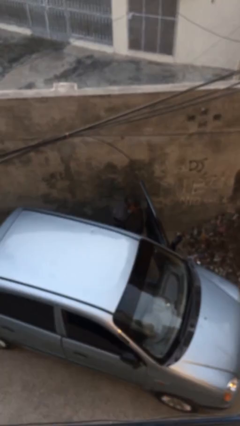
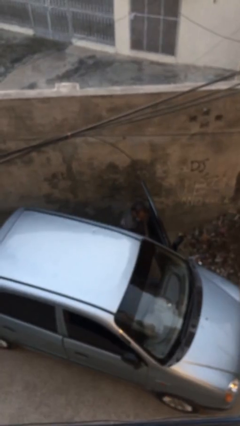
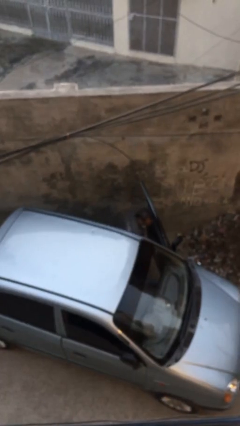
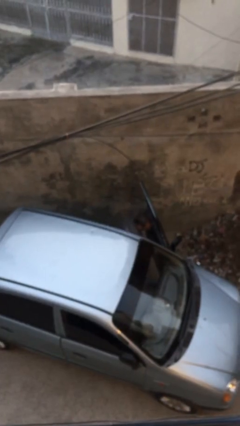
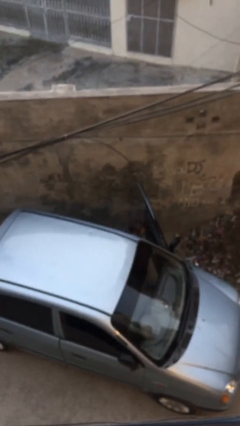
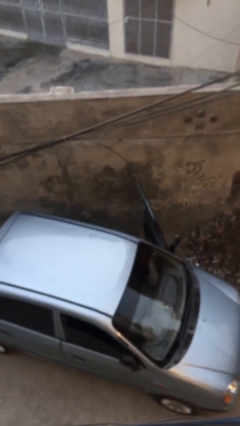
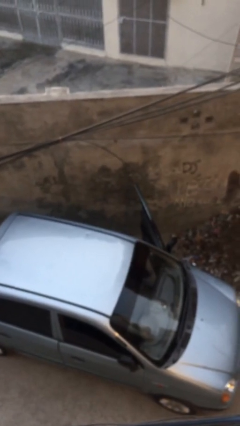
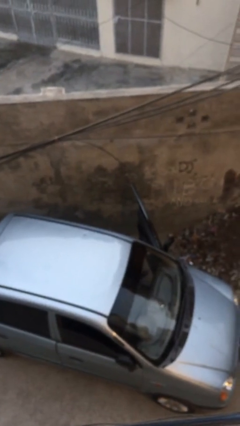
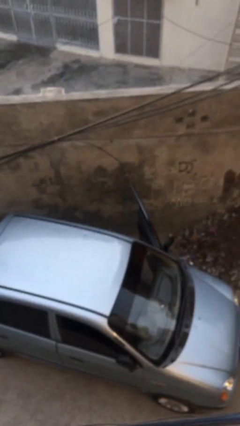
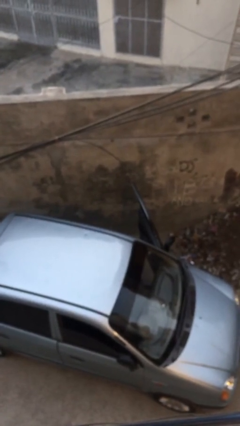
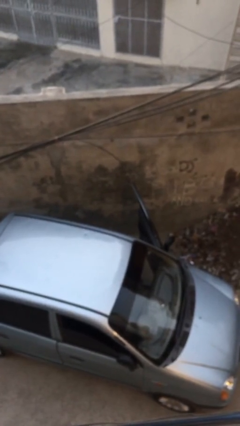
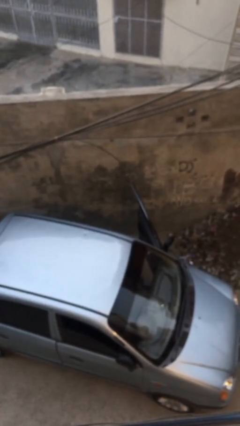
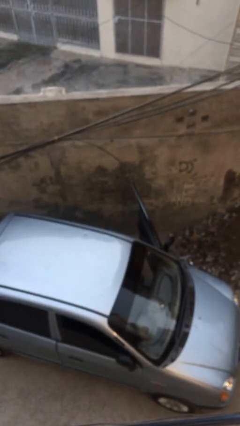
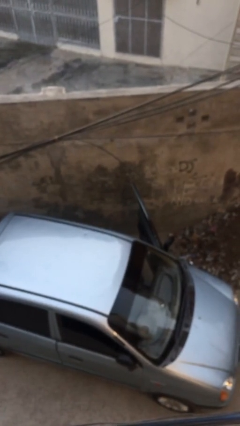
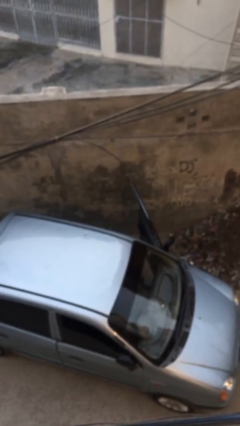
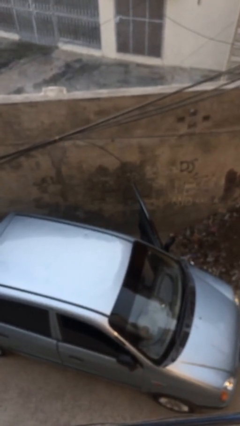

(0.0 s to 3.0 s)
person enters car

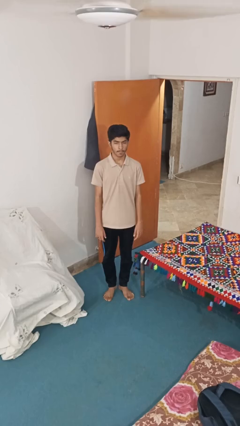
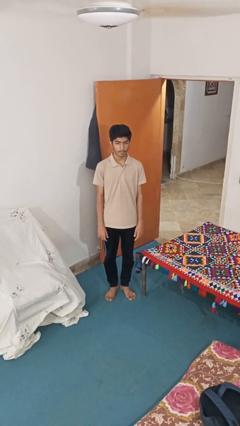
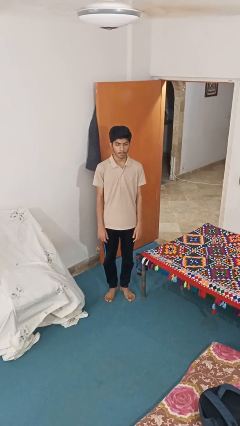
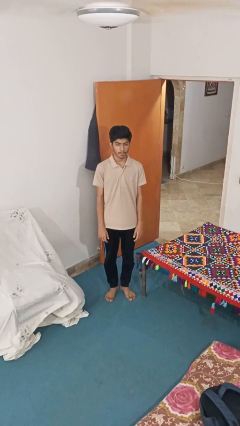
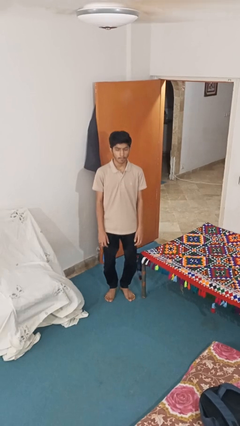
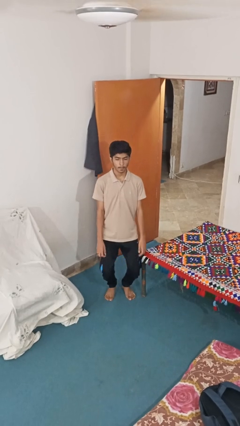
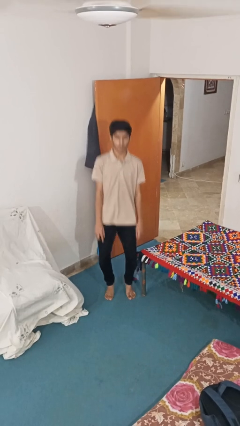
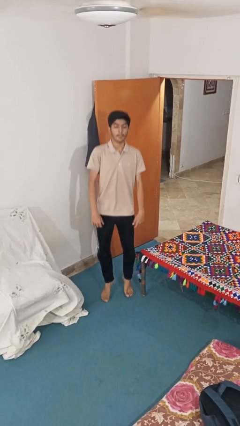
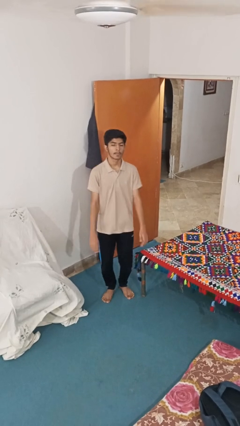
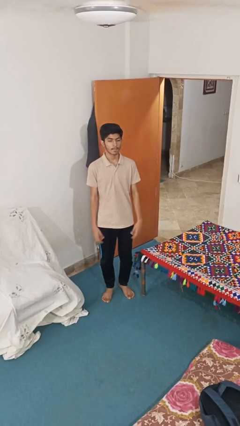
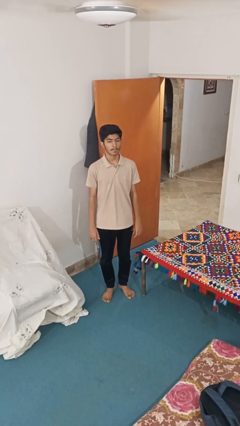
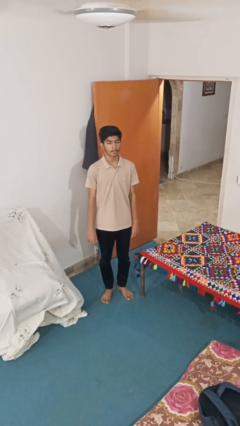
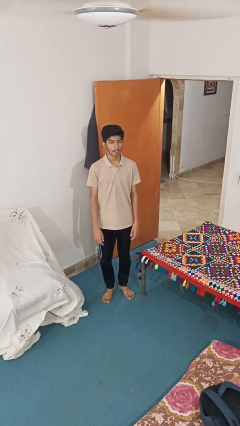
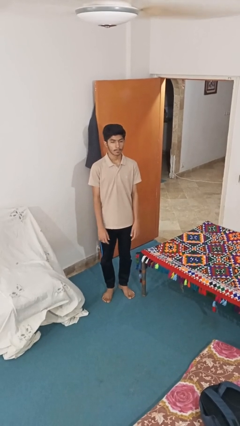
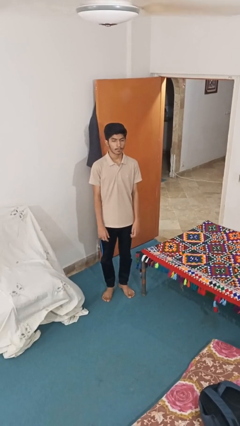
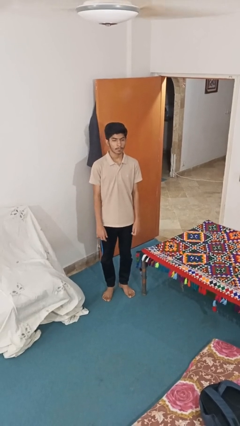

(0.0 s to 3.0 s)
person jumps

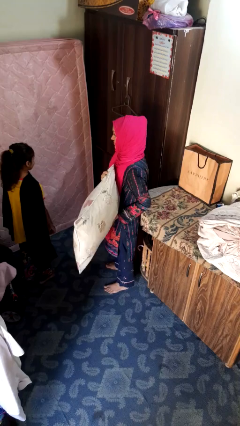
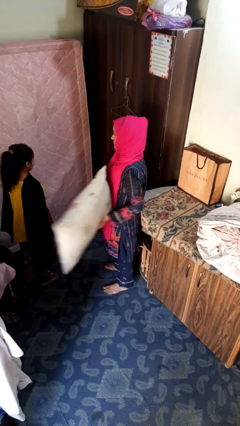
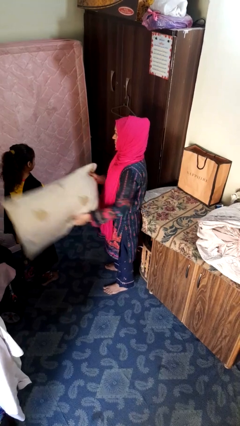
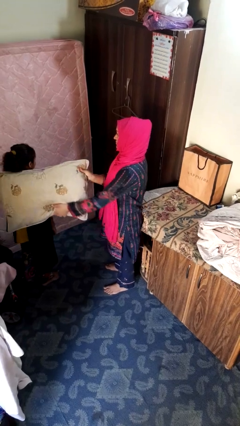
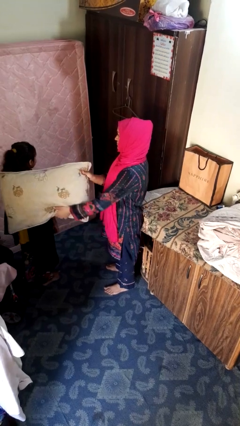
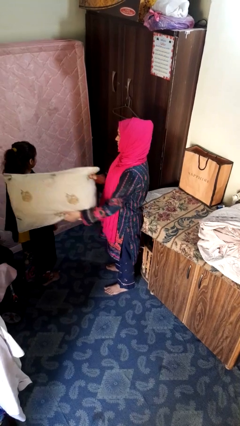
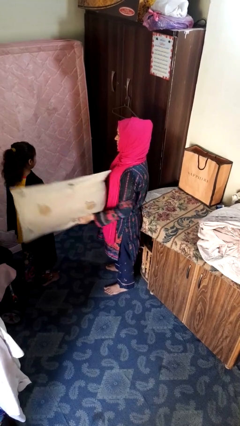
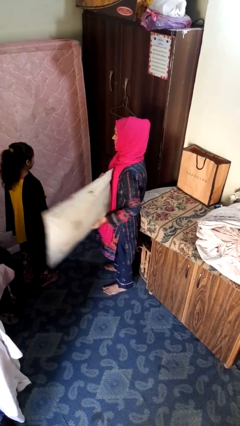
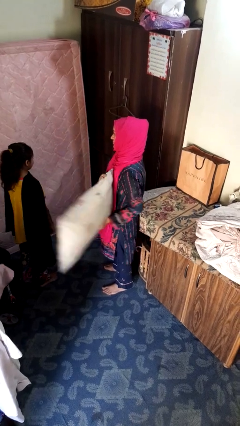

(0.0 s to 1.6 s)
person hits person with pillow

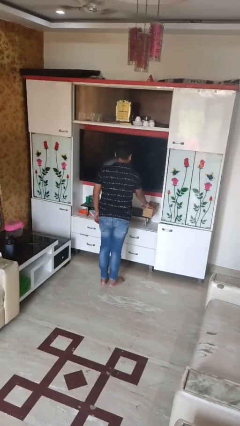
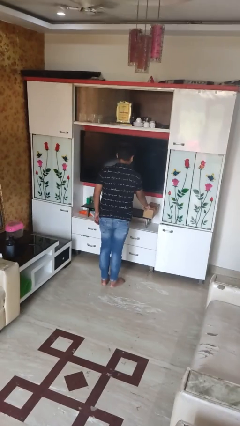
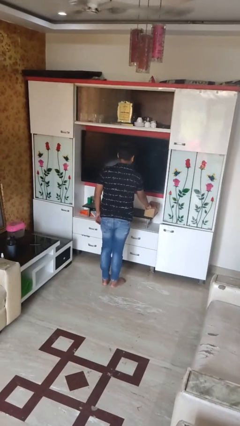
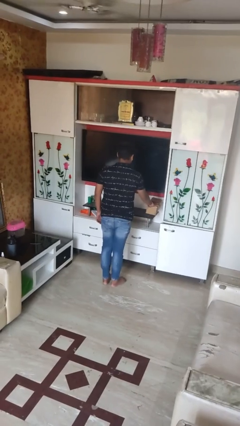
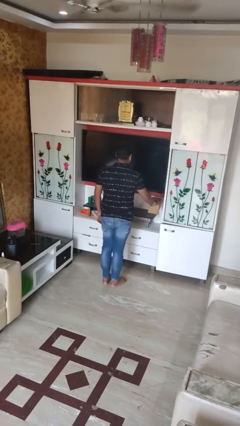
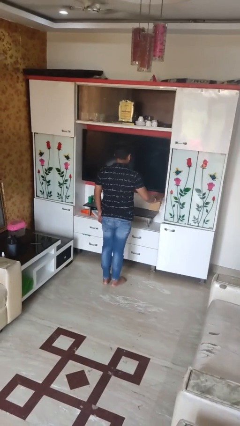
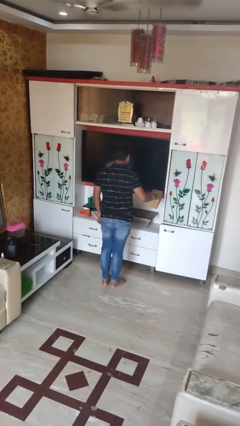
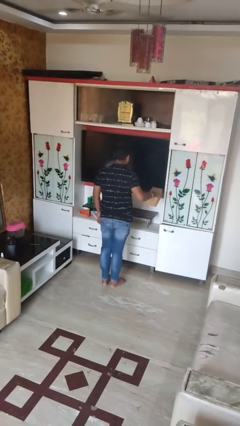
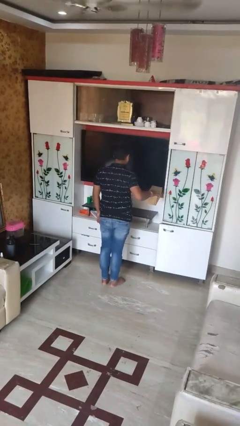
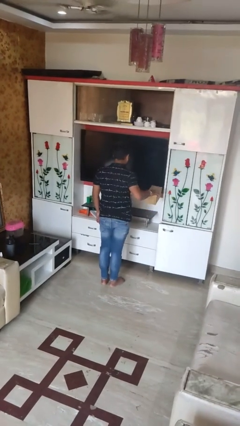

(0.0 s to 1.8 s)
person picks up object from countertop

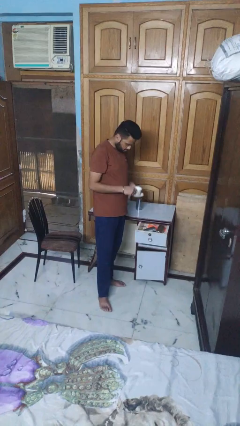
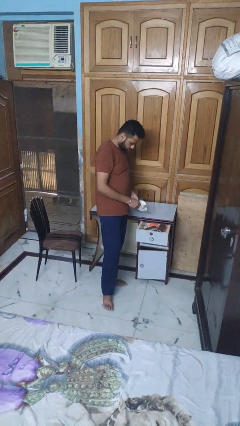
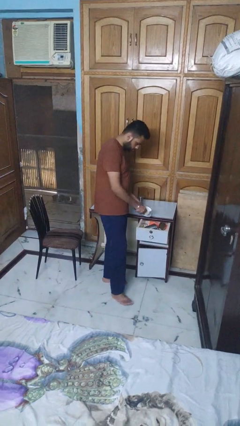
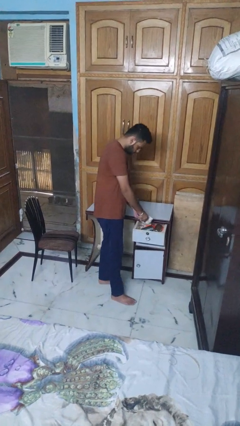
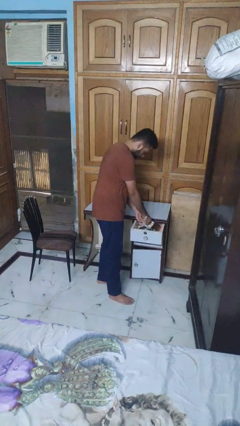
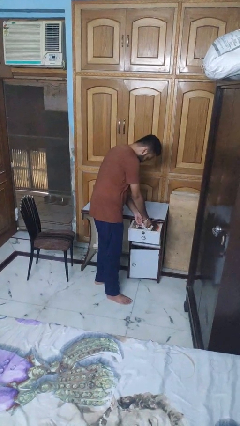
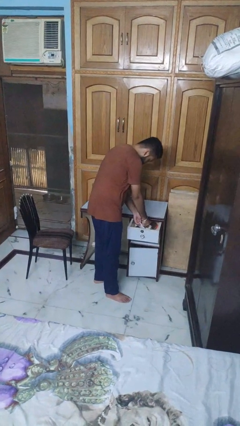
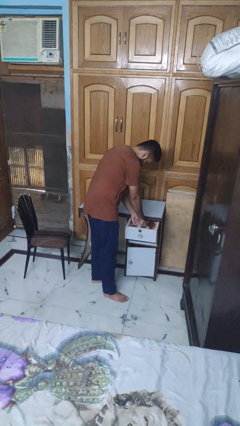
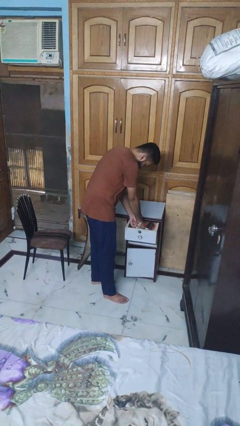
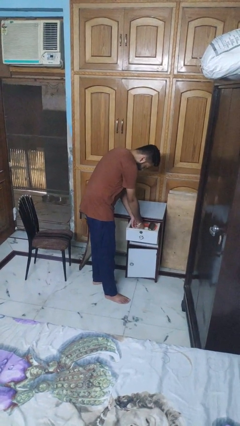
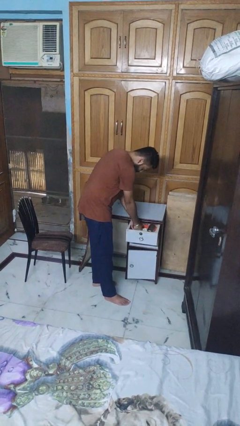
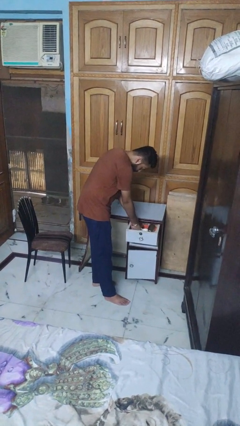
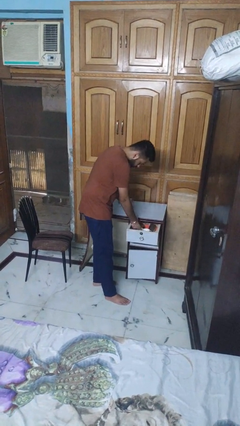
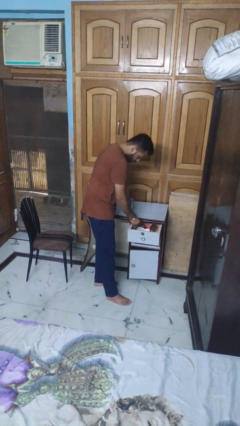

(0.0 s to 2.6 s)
person puts object into kitchen drawer

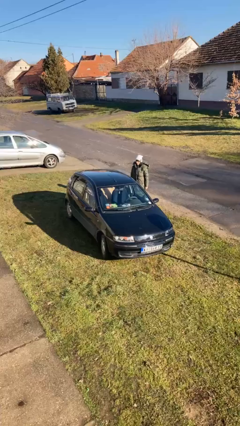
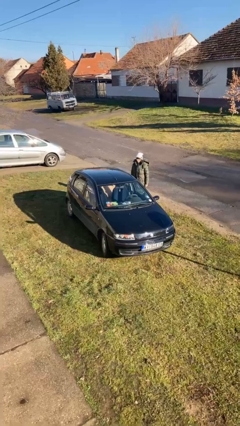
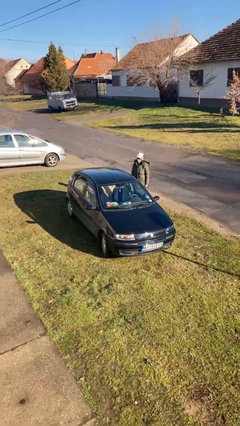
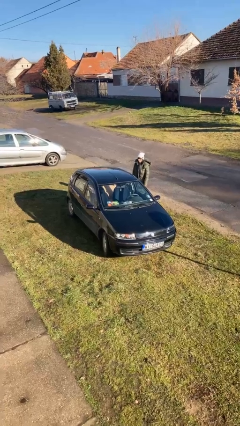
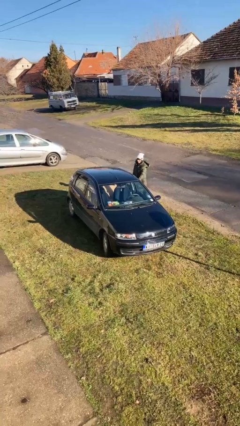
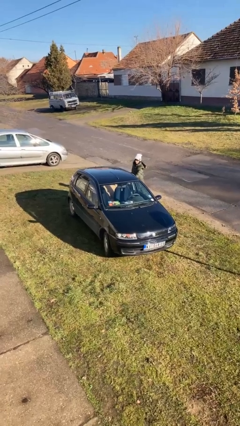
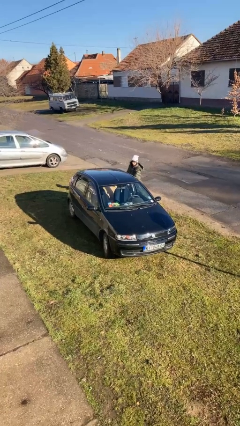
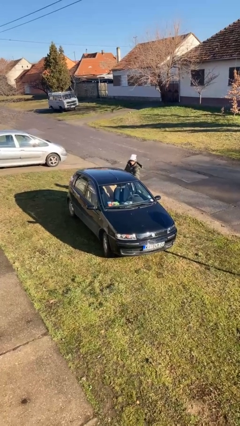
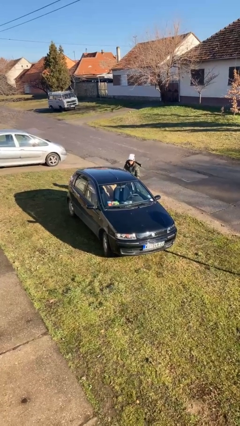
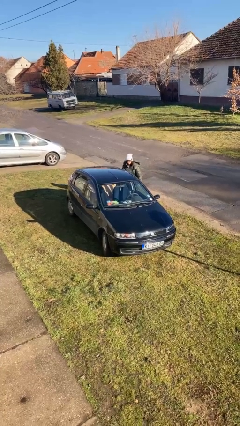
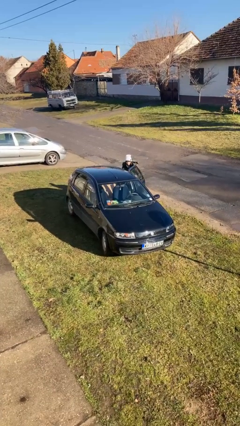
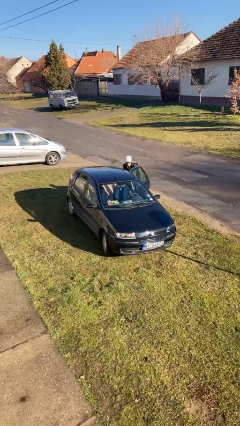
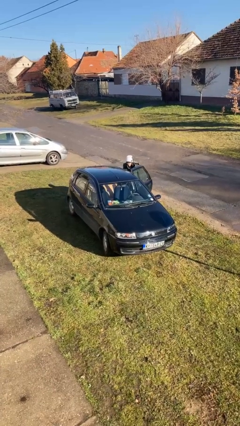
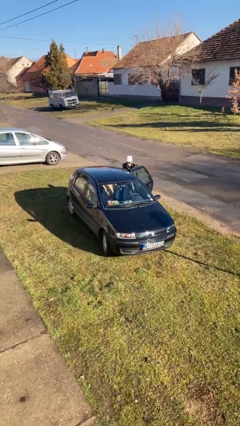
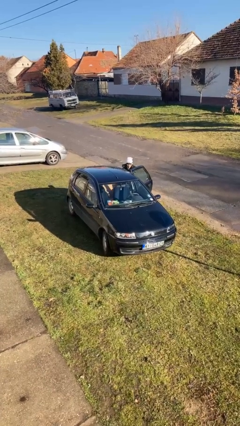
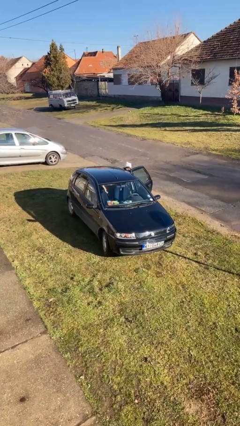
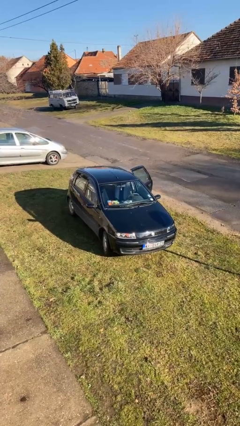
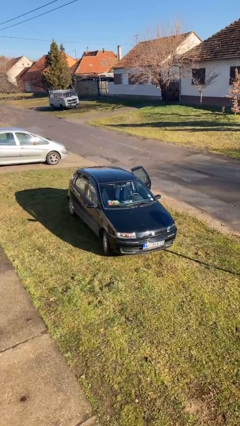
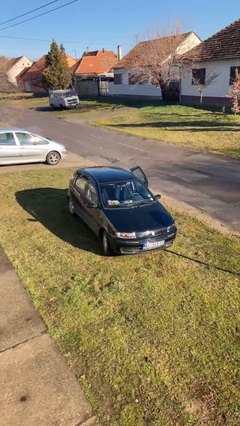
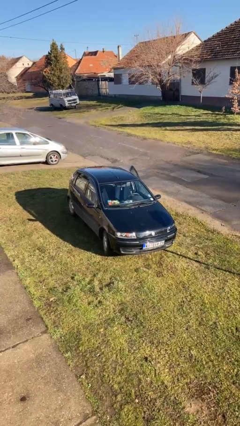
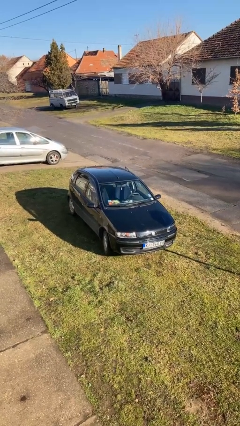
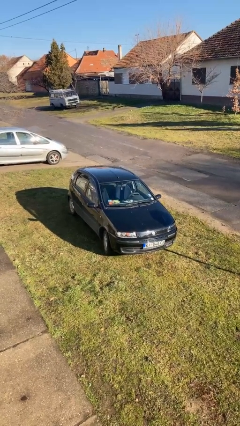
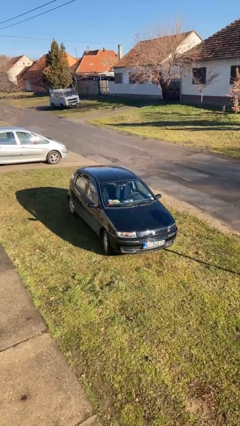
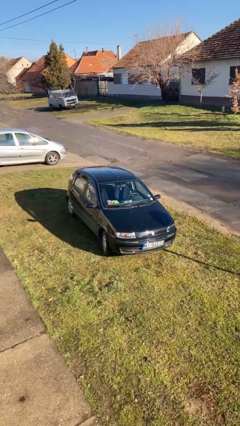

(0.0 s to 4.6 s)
car picks up person

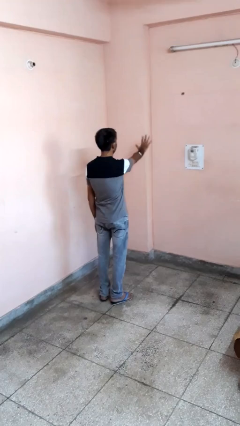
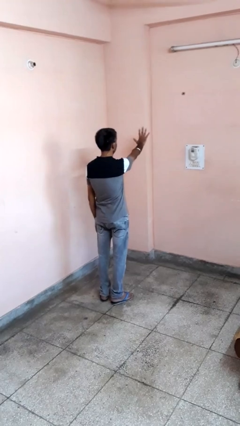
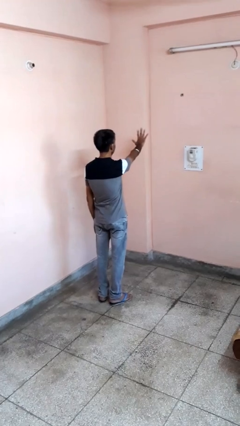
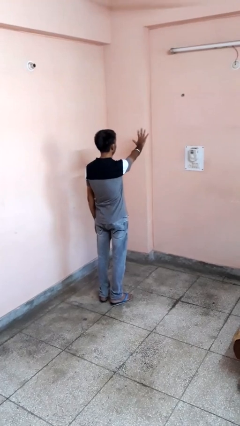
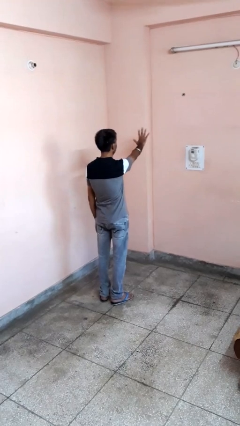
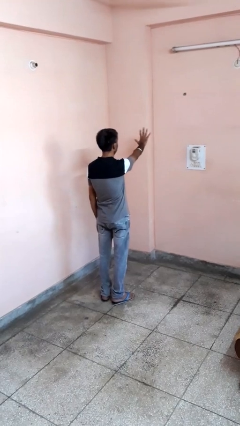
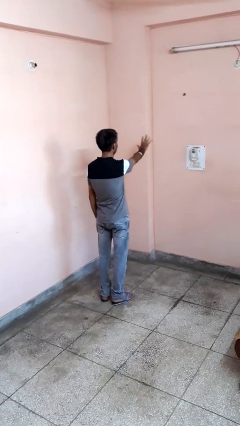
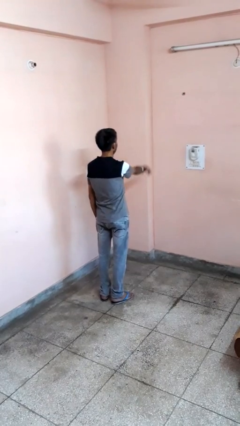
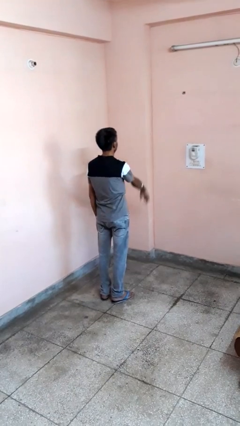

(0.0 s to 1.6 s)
person gestures number five
